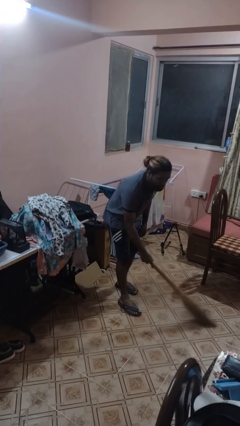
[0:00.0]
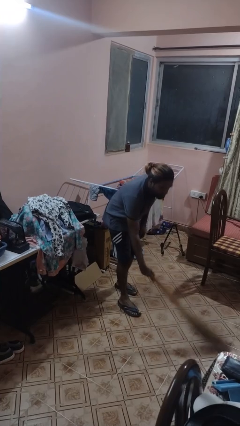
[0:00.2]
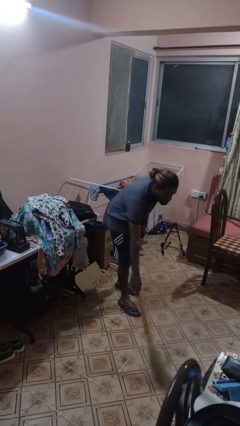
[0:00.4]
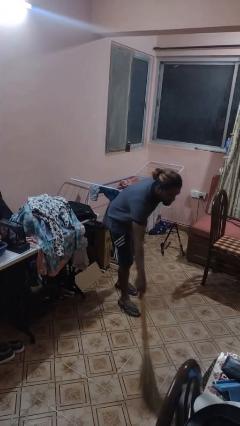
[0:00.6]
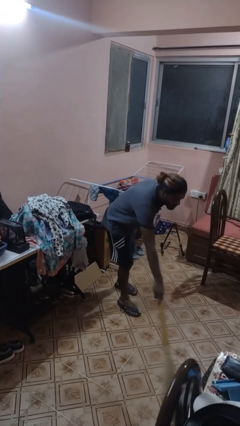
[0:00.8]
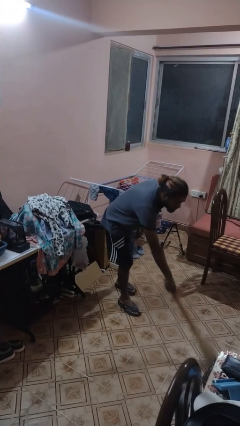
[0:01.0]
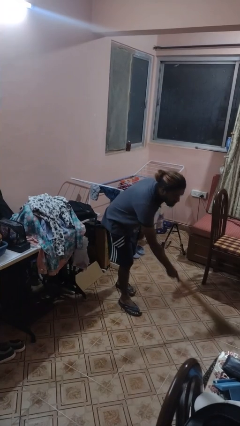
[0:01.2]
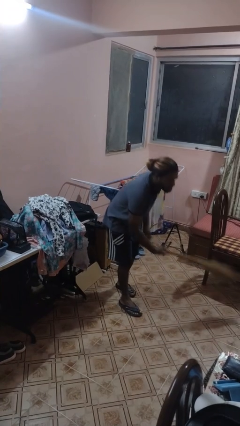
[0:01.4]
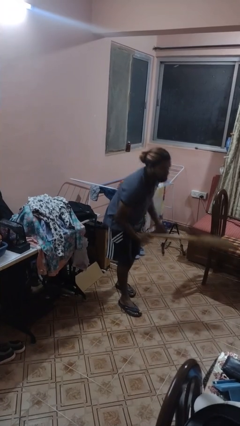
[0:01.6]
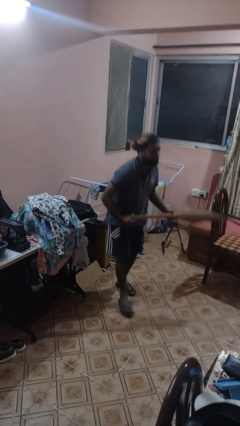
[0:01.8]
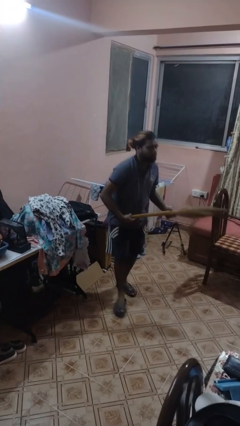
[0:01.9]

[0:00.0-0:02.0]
person sweeps floor

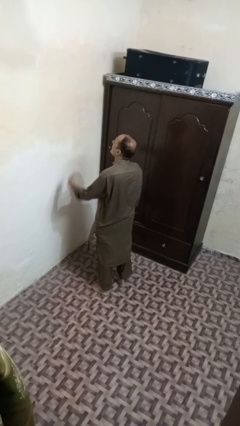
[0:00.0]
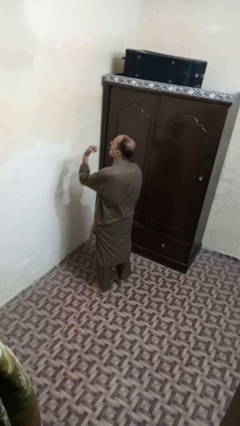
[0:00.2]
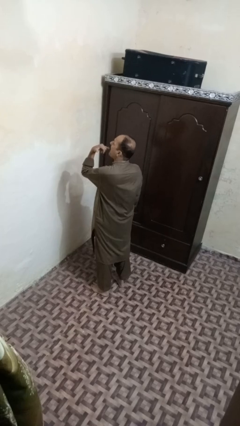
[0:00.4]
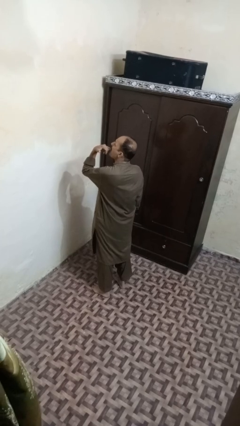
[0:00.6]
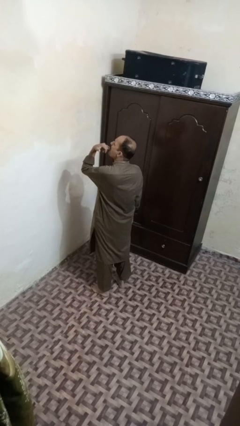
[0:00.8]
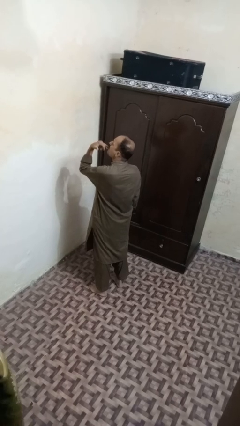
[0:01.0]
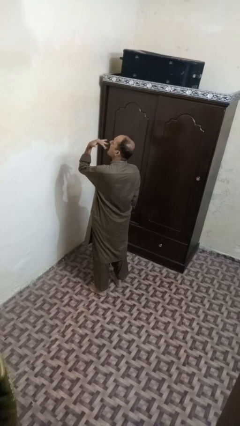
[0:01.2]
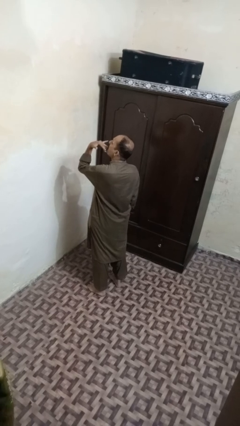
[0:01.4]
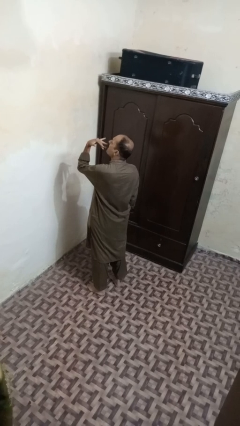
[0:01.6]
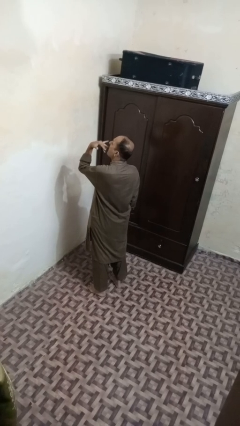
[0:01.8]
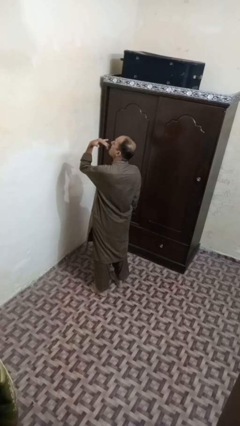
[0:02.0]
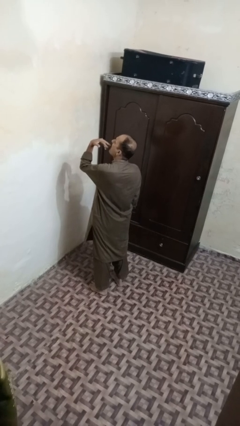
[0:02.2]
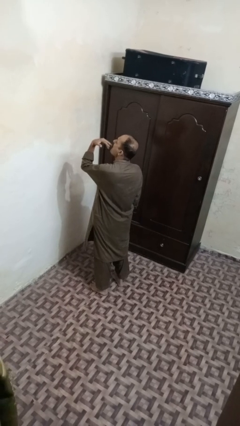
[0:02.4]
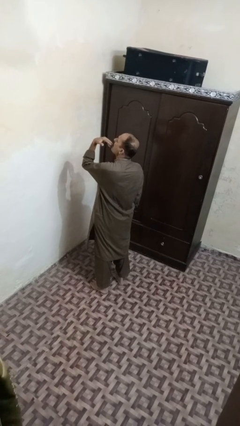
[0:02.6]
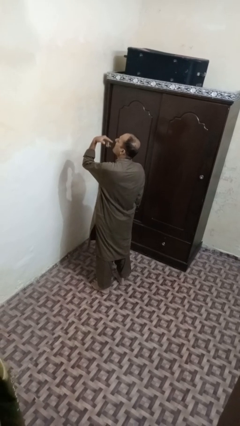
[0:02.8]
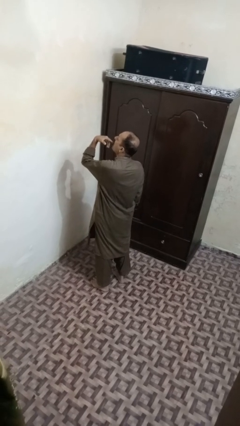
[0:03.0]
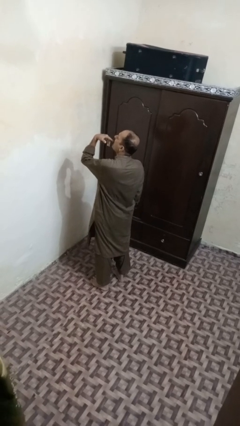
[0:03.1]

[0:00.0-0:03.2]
person licks fingers

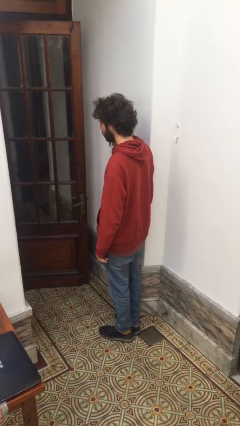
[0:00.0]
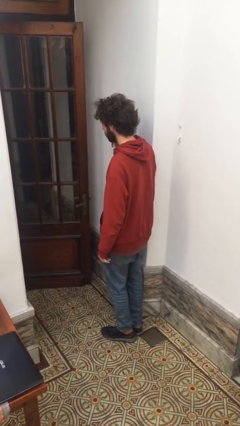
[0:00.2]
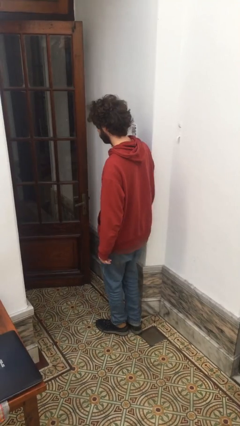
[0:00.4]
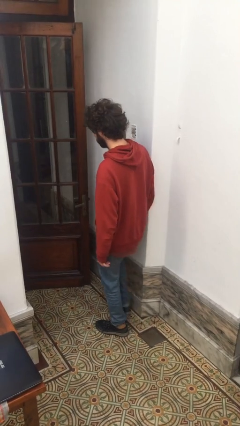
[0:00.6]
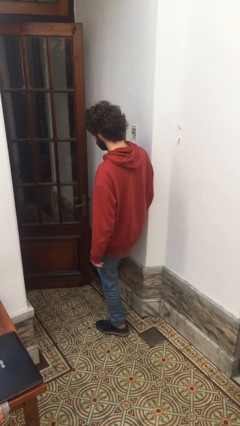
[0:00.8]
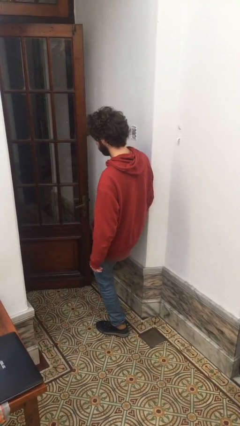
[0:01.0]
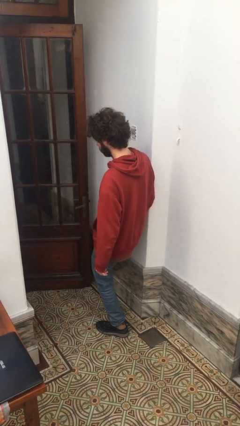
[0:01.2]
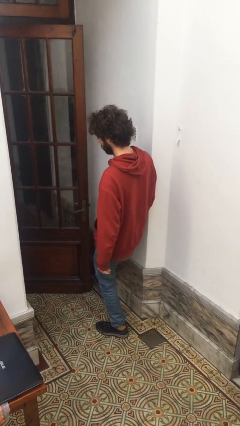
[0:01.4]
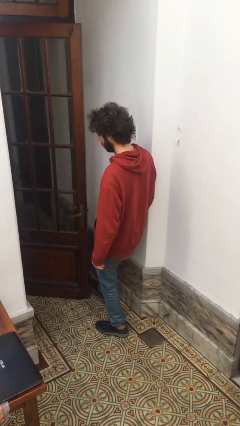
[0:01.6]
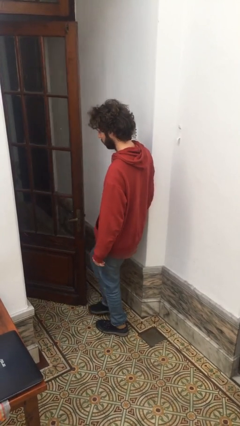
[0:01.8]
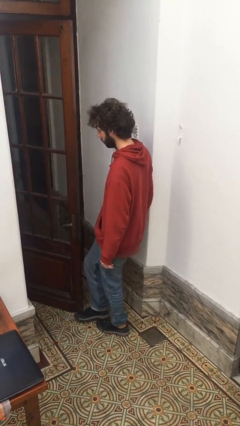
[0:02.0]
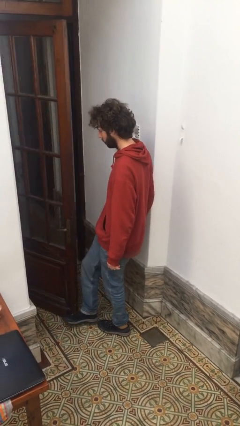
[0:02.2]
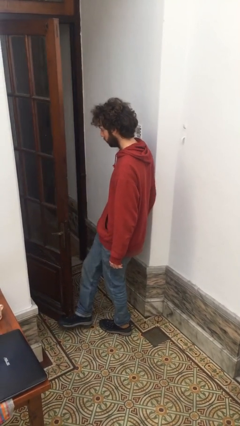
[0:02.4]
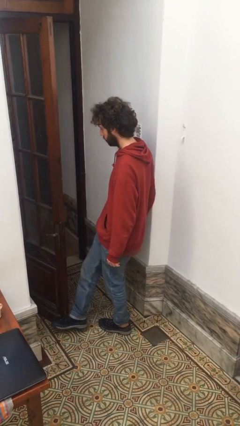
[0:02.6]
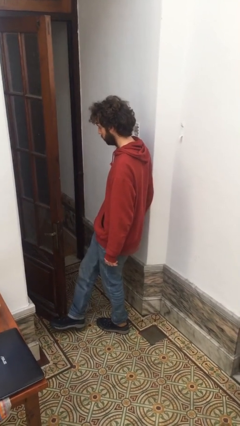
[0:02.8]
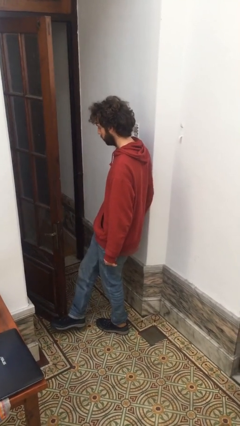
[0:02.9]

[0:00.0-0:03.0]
person opens facility door

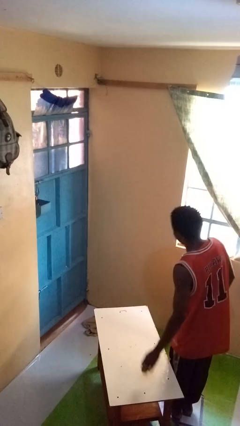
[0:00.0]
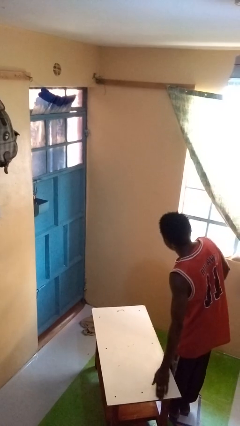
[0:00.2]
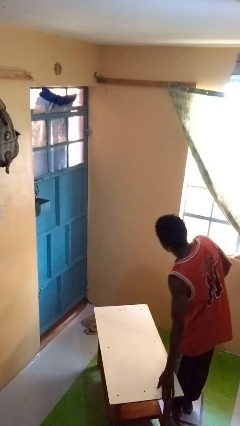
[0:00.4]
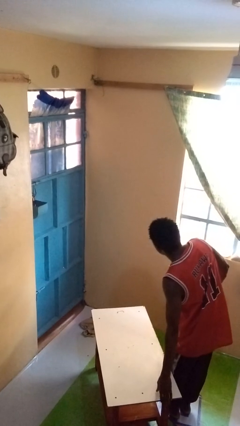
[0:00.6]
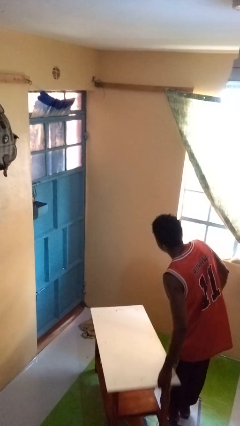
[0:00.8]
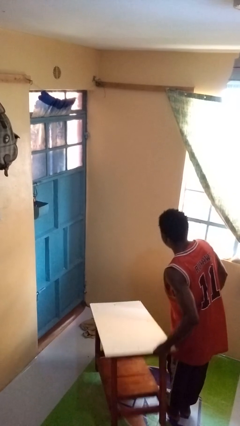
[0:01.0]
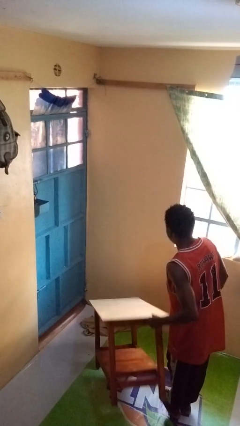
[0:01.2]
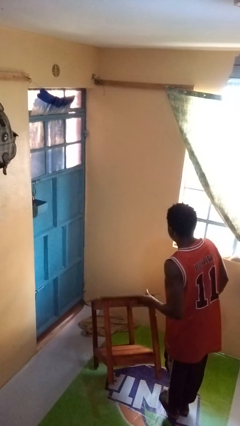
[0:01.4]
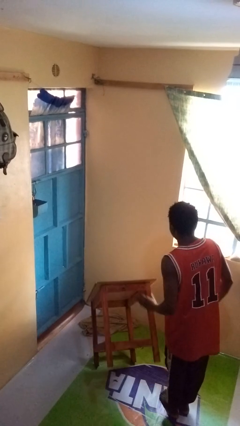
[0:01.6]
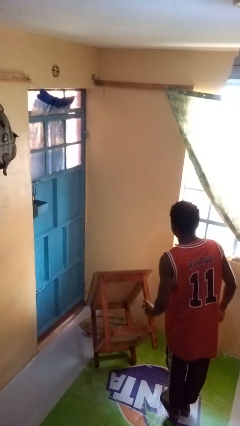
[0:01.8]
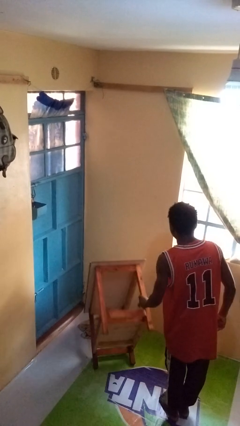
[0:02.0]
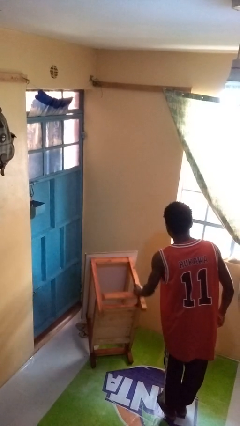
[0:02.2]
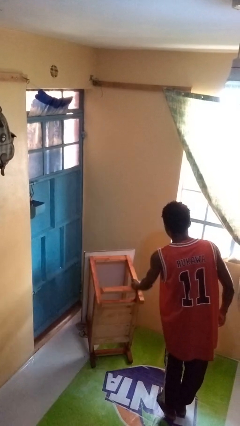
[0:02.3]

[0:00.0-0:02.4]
person knocks over furniture

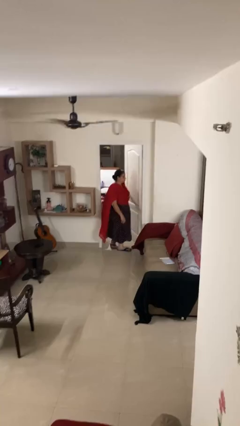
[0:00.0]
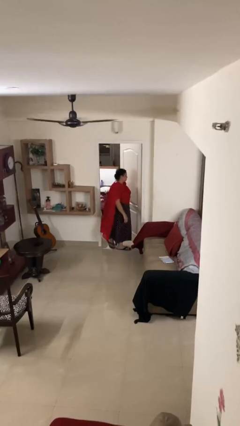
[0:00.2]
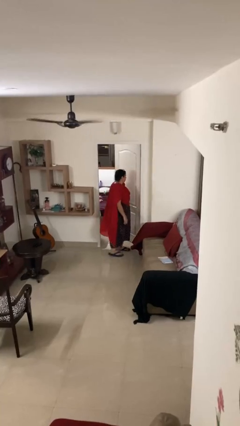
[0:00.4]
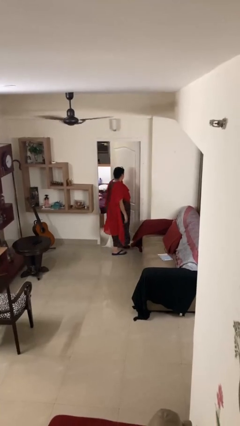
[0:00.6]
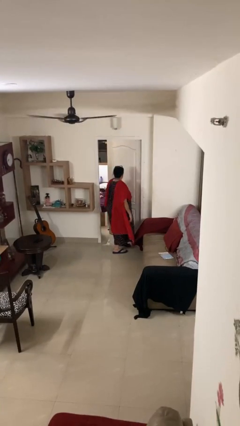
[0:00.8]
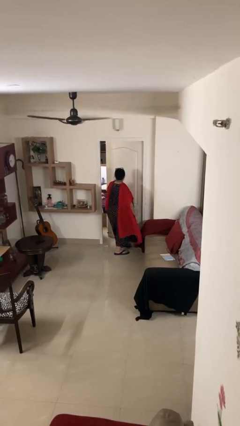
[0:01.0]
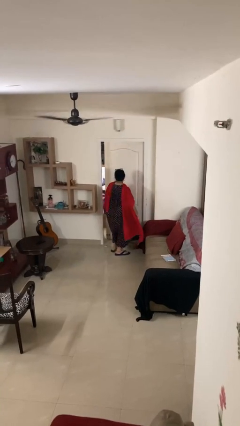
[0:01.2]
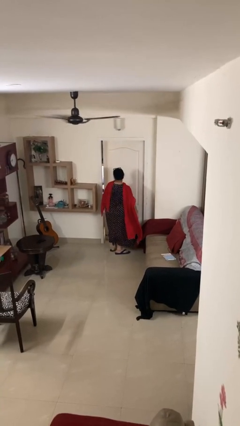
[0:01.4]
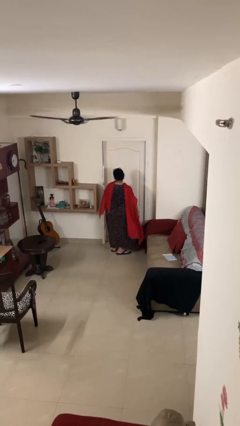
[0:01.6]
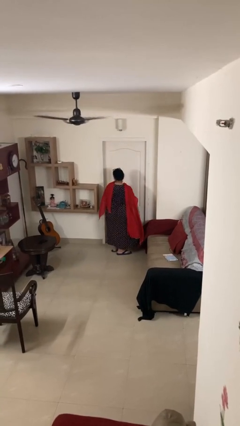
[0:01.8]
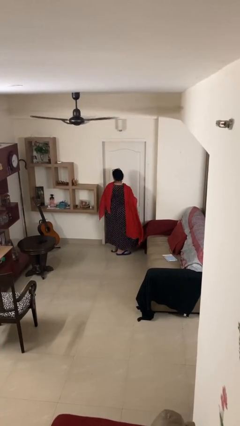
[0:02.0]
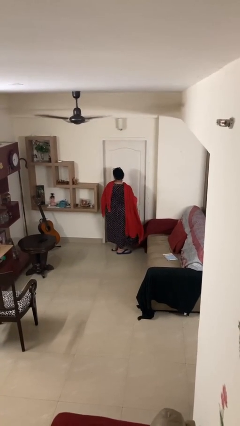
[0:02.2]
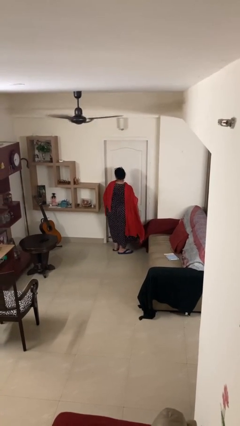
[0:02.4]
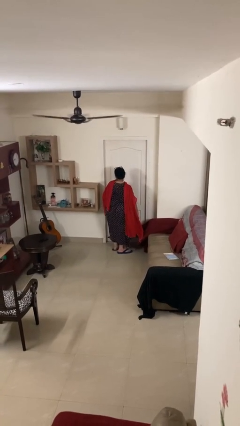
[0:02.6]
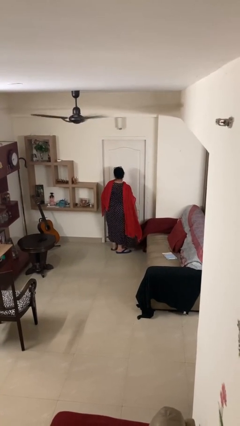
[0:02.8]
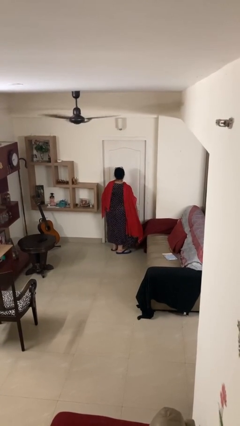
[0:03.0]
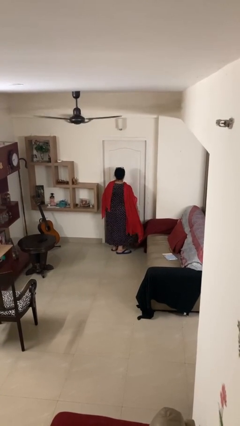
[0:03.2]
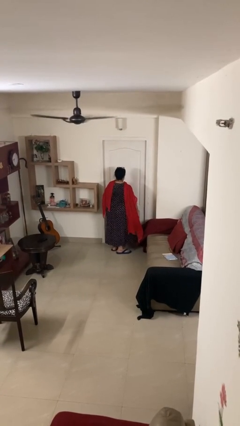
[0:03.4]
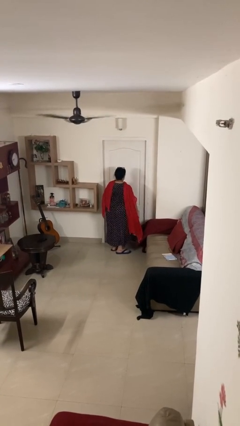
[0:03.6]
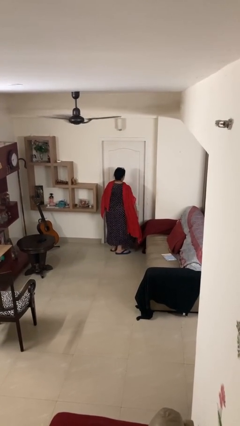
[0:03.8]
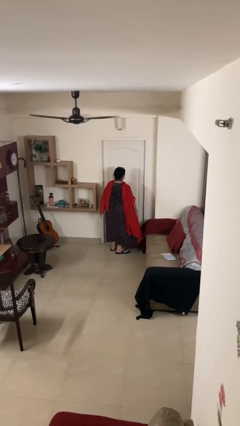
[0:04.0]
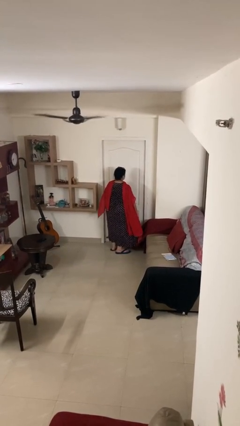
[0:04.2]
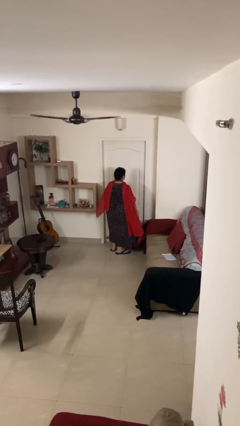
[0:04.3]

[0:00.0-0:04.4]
person closes facility door

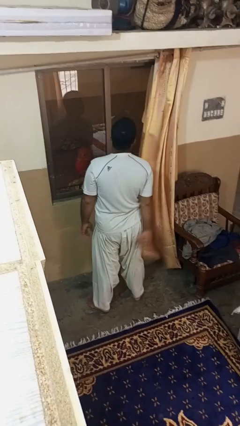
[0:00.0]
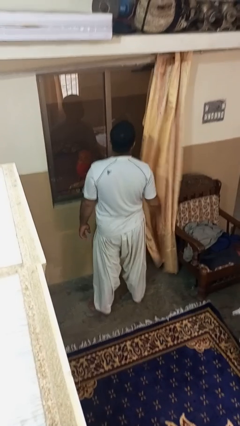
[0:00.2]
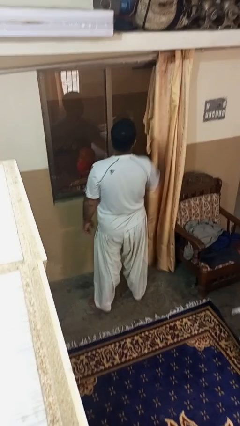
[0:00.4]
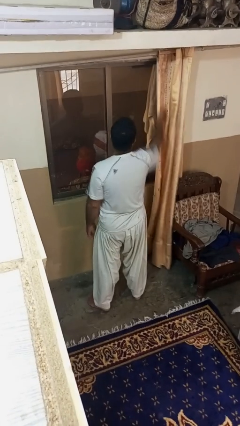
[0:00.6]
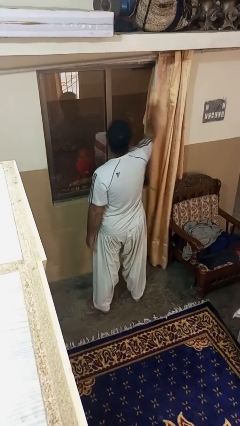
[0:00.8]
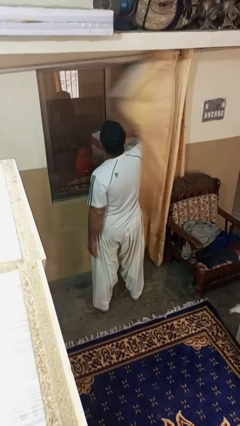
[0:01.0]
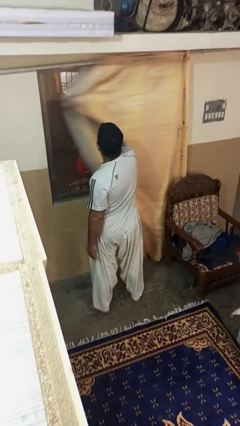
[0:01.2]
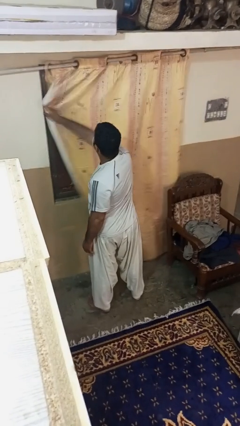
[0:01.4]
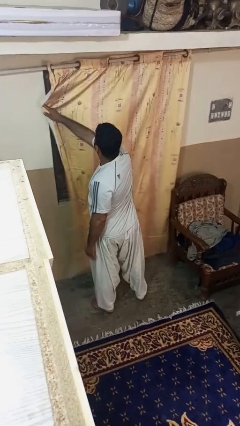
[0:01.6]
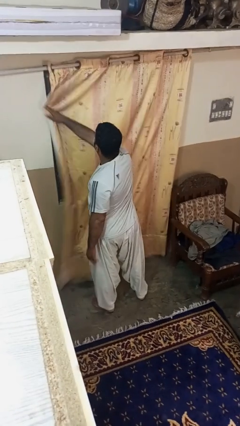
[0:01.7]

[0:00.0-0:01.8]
person closes curtains

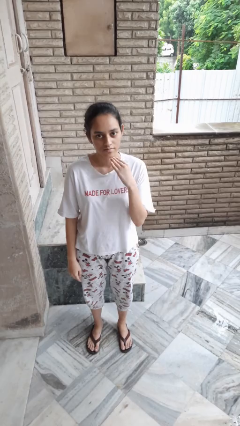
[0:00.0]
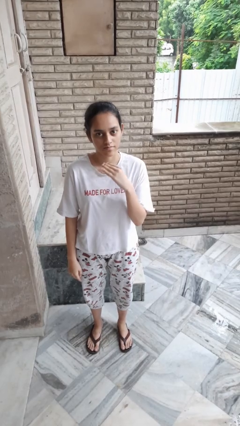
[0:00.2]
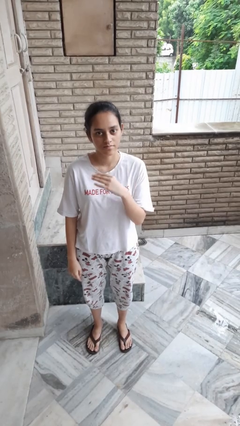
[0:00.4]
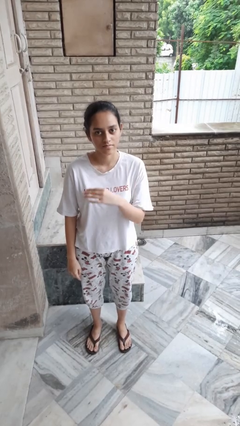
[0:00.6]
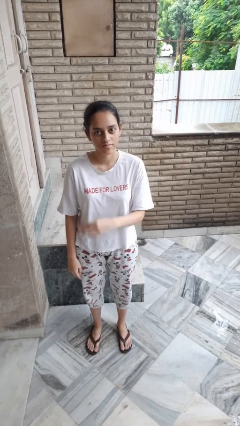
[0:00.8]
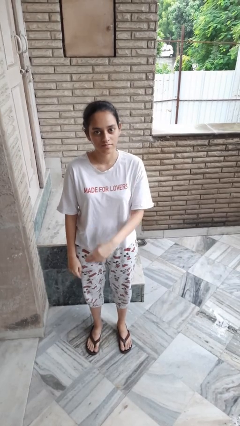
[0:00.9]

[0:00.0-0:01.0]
person gestures cut
